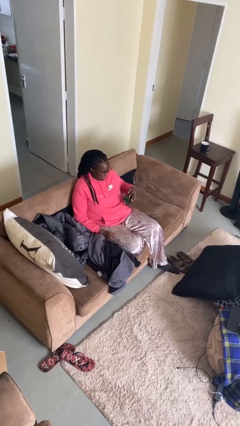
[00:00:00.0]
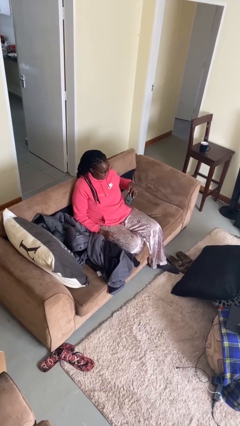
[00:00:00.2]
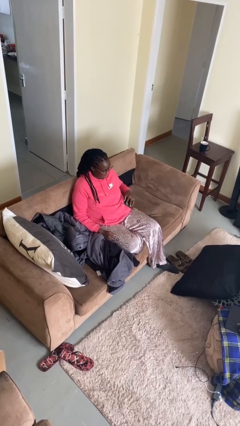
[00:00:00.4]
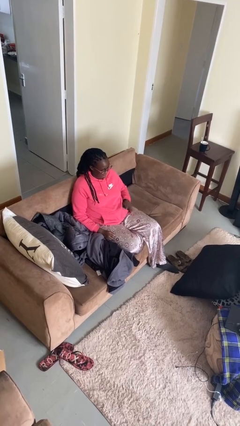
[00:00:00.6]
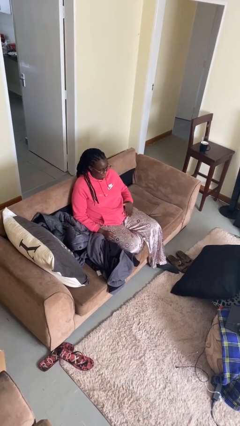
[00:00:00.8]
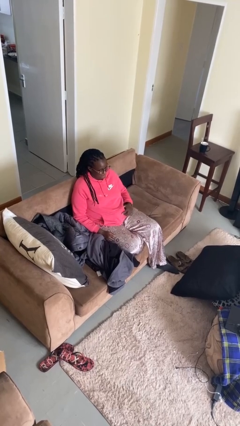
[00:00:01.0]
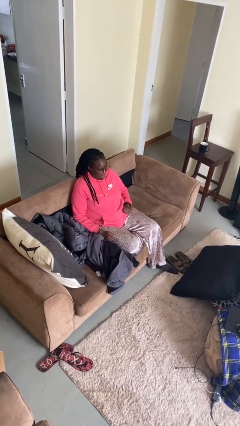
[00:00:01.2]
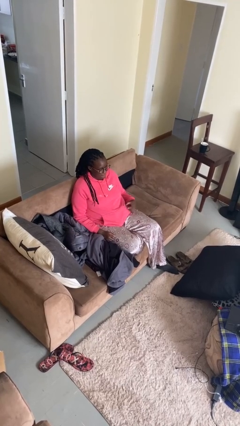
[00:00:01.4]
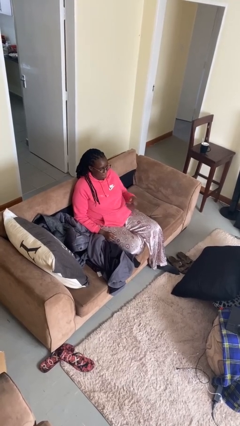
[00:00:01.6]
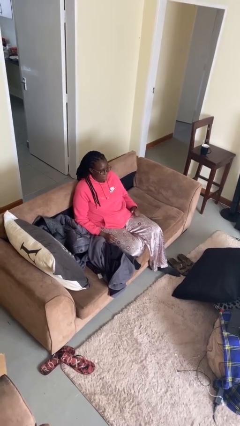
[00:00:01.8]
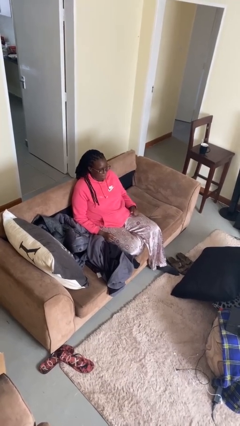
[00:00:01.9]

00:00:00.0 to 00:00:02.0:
person puts phone into pocket

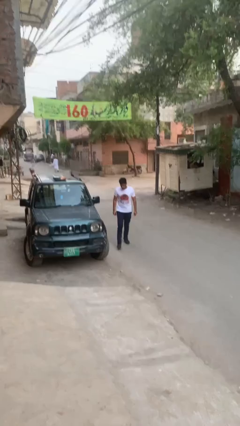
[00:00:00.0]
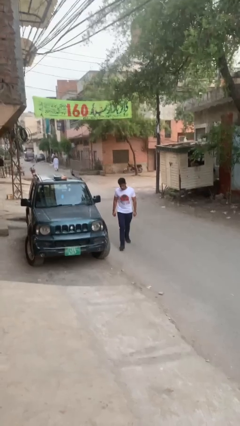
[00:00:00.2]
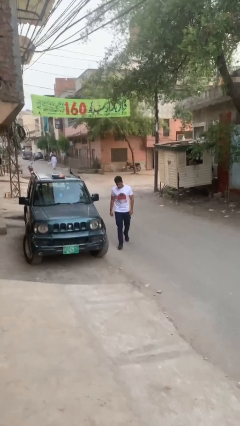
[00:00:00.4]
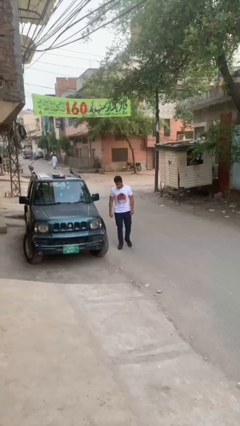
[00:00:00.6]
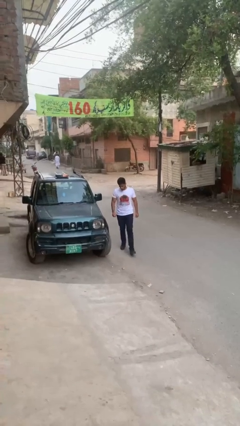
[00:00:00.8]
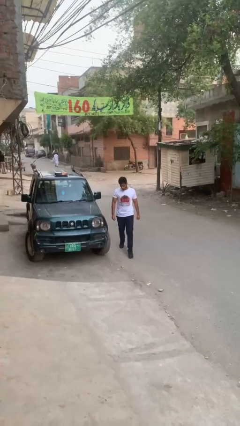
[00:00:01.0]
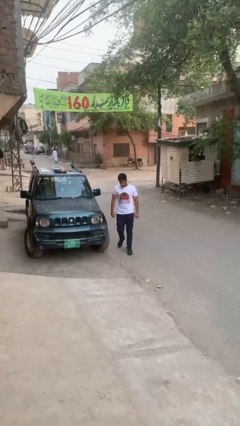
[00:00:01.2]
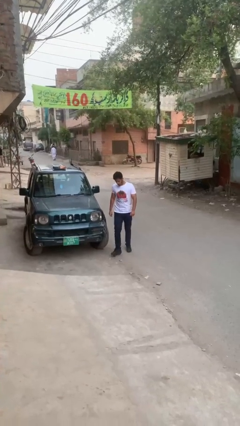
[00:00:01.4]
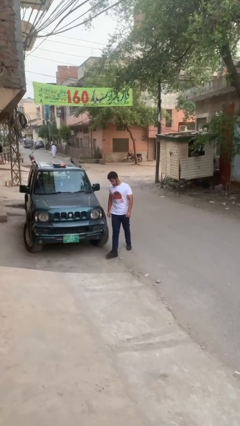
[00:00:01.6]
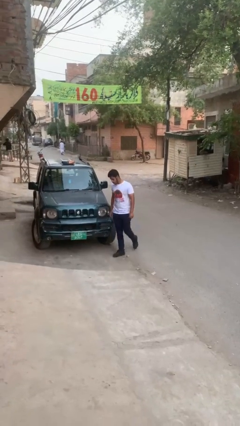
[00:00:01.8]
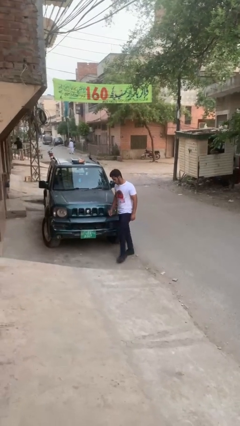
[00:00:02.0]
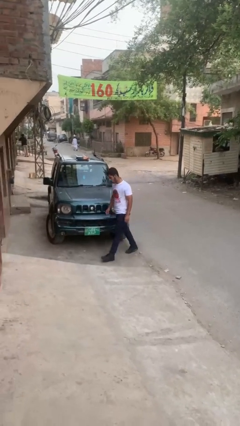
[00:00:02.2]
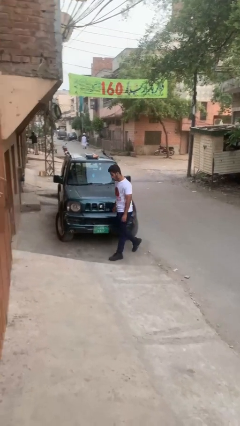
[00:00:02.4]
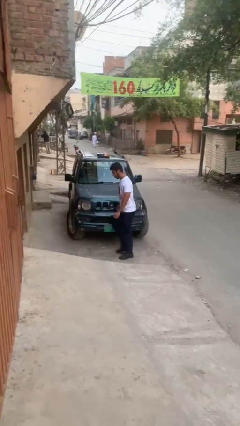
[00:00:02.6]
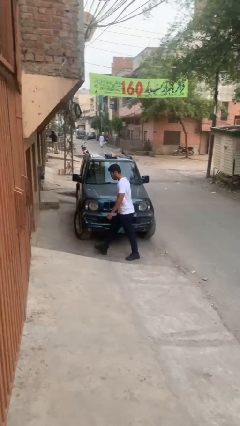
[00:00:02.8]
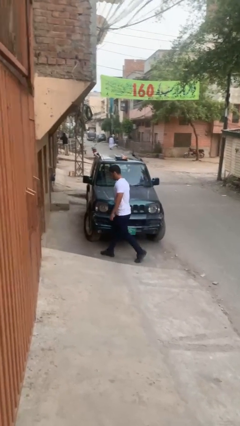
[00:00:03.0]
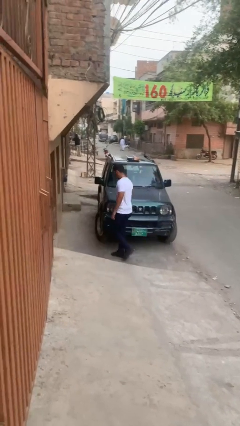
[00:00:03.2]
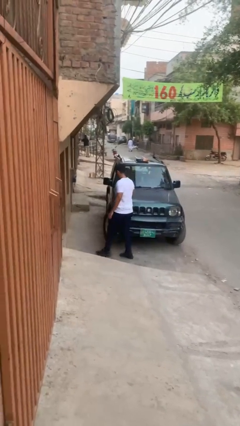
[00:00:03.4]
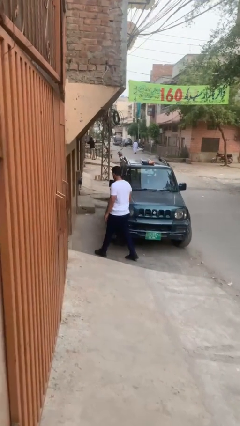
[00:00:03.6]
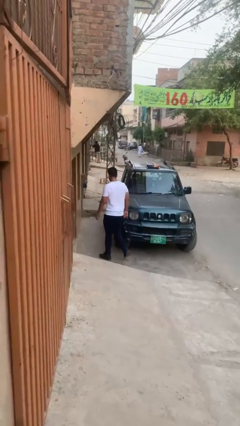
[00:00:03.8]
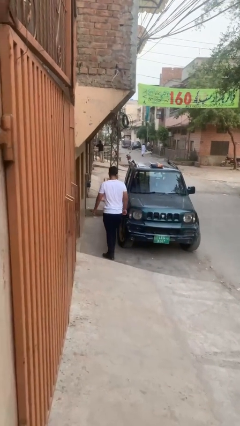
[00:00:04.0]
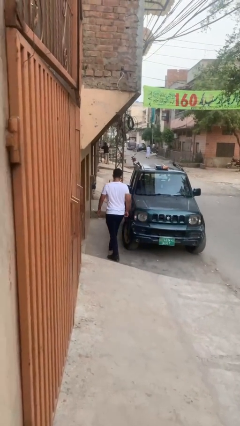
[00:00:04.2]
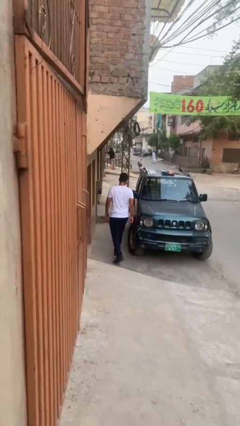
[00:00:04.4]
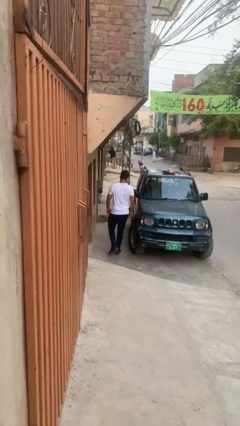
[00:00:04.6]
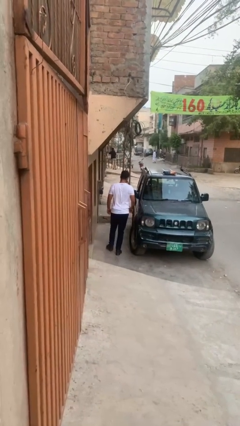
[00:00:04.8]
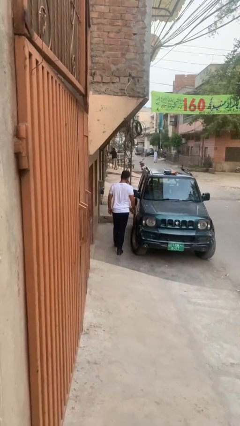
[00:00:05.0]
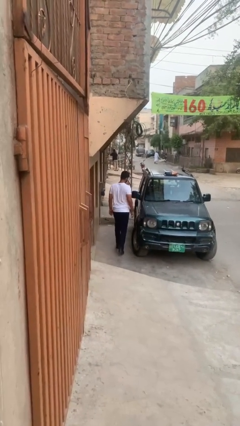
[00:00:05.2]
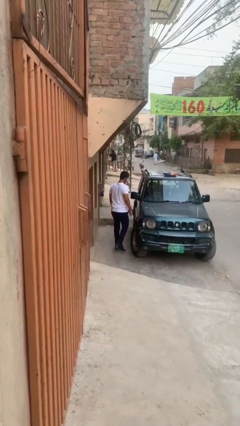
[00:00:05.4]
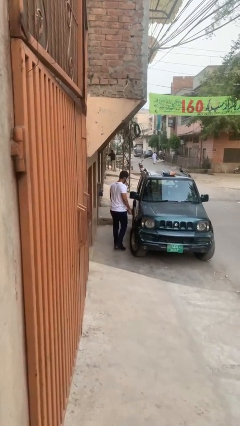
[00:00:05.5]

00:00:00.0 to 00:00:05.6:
person walks around car

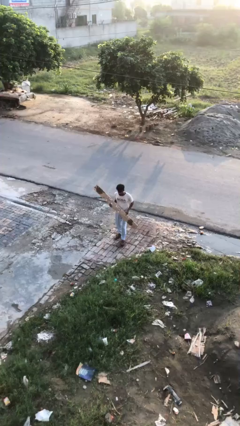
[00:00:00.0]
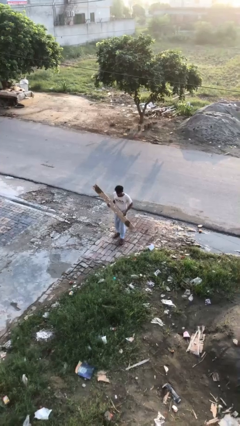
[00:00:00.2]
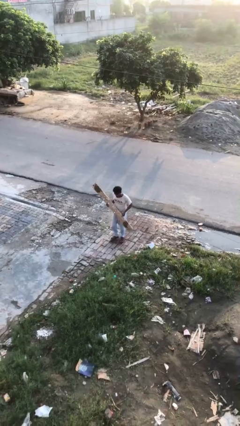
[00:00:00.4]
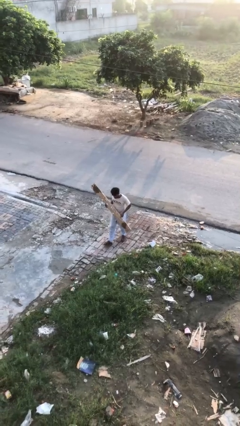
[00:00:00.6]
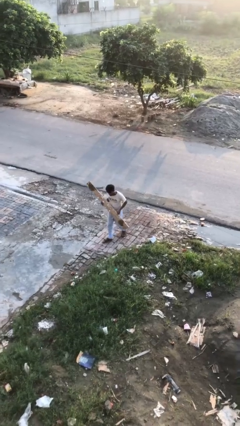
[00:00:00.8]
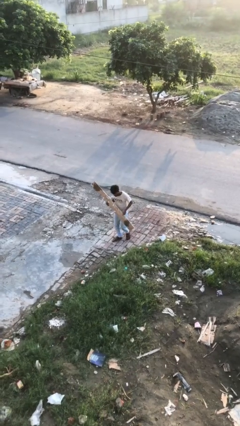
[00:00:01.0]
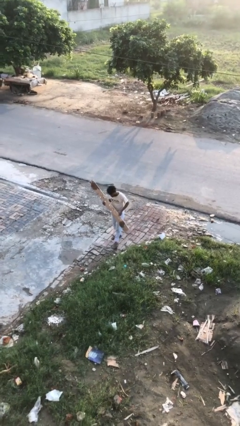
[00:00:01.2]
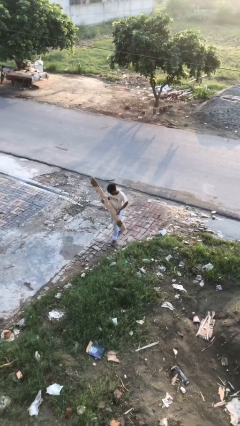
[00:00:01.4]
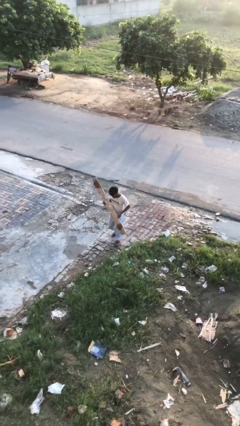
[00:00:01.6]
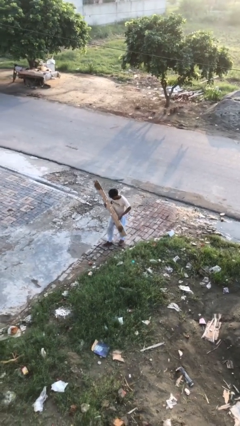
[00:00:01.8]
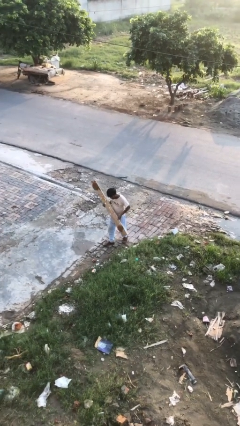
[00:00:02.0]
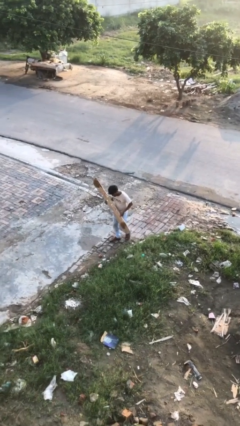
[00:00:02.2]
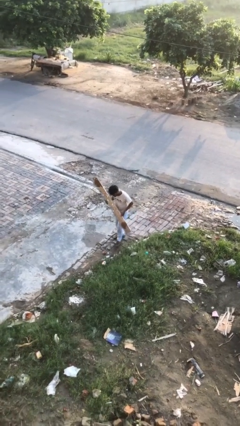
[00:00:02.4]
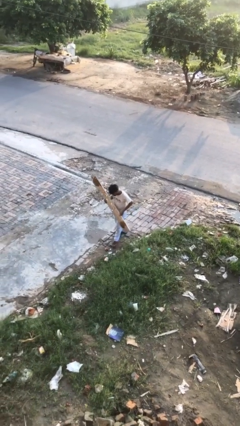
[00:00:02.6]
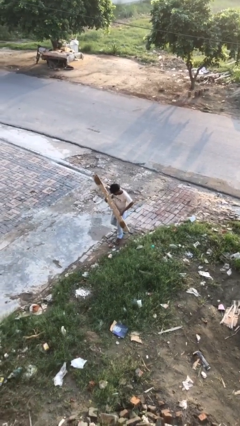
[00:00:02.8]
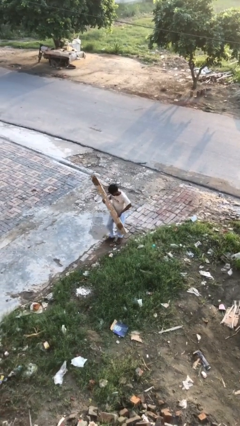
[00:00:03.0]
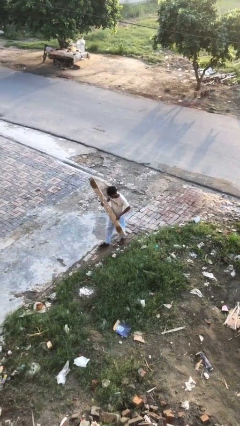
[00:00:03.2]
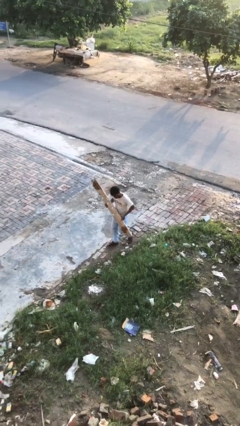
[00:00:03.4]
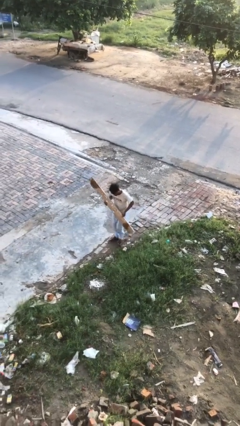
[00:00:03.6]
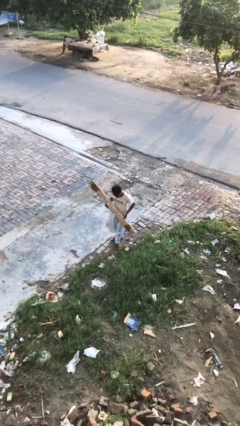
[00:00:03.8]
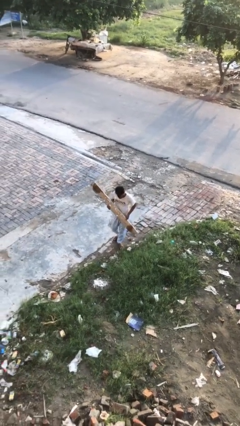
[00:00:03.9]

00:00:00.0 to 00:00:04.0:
person carries heavy object

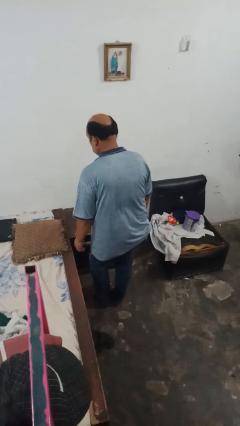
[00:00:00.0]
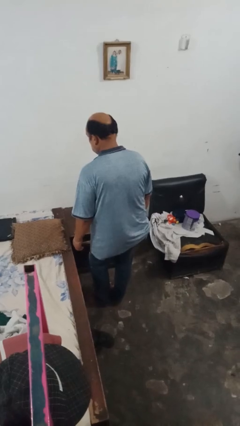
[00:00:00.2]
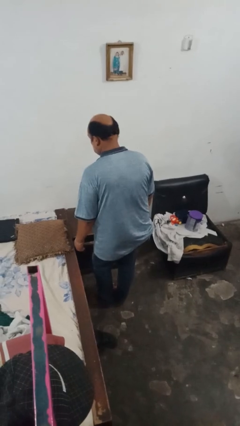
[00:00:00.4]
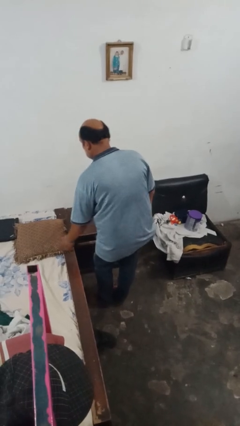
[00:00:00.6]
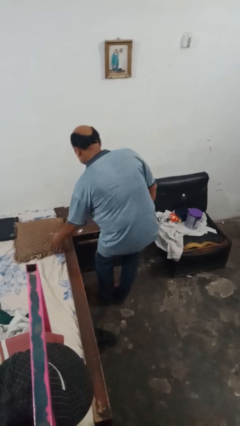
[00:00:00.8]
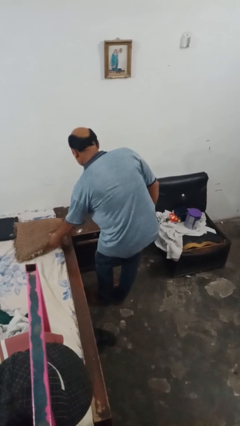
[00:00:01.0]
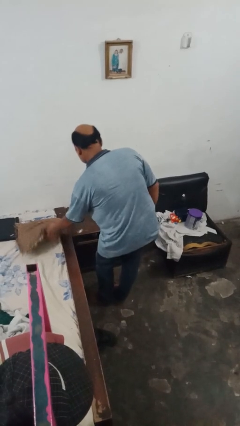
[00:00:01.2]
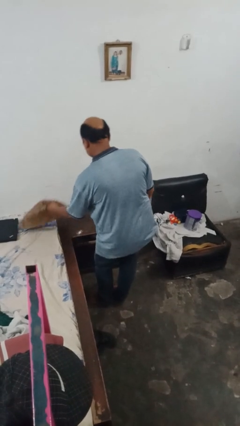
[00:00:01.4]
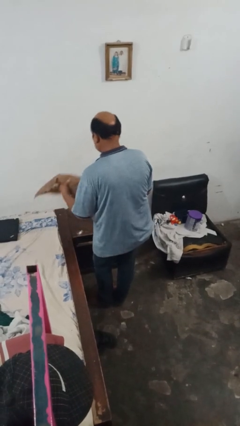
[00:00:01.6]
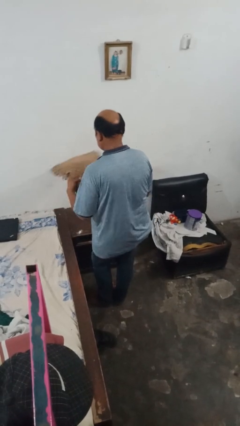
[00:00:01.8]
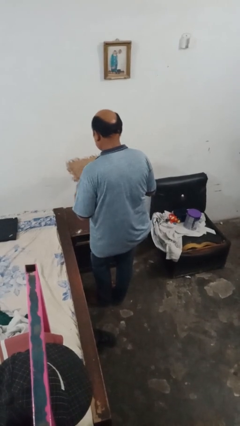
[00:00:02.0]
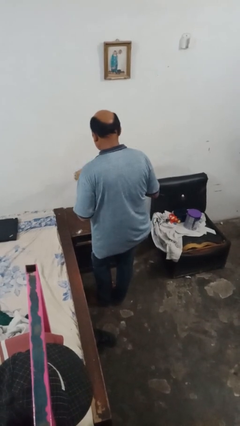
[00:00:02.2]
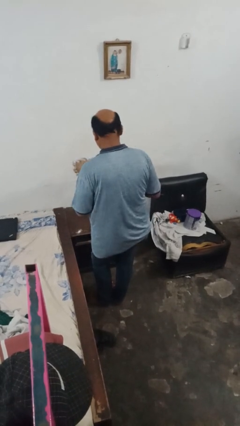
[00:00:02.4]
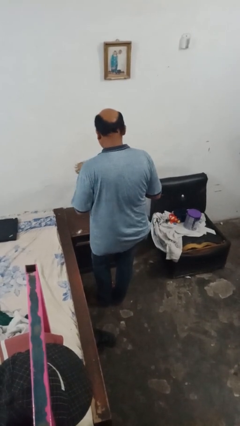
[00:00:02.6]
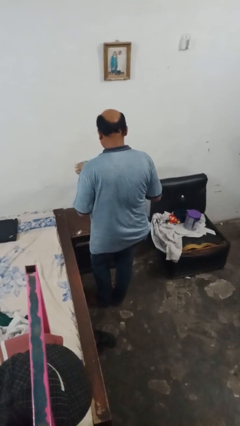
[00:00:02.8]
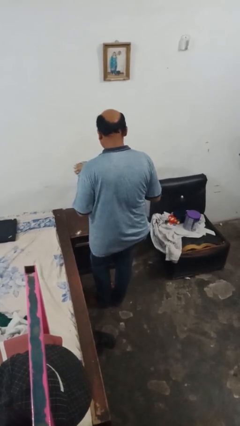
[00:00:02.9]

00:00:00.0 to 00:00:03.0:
person picks up object from bed

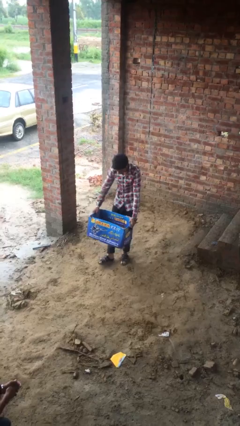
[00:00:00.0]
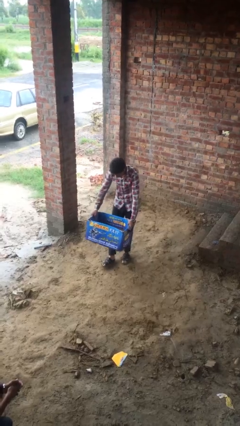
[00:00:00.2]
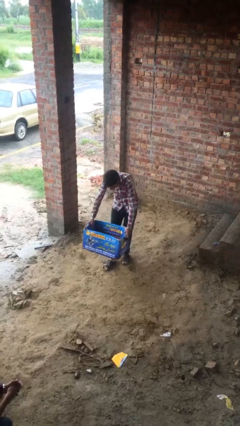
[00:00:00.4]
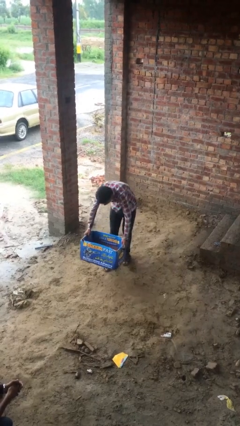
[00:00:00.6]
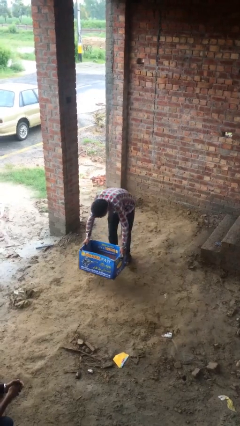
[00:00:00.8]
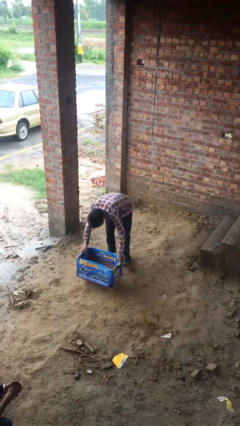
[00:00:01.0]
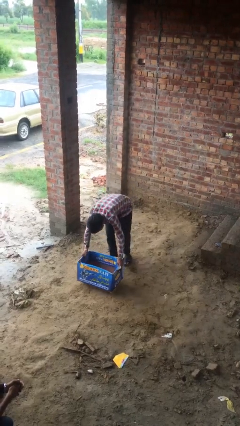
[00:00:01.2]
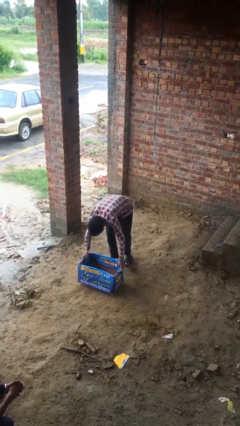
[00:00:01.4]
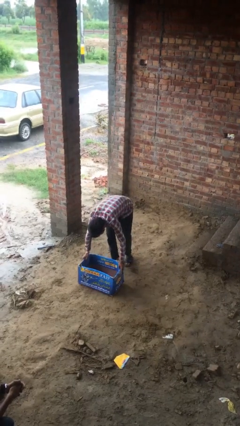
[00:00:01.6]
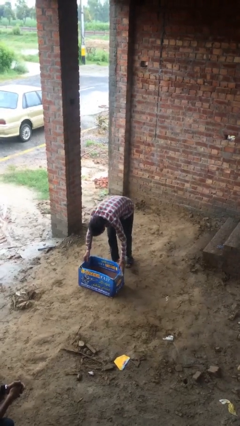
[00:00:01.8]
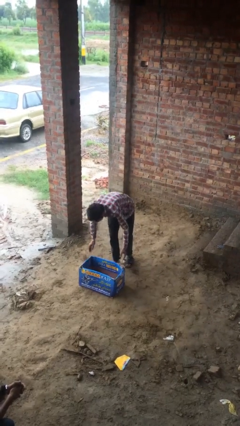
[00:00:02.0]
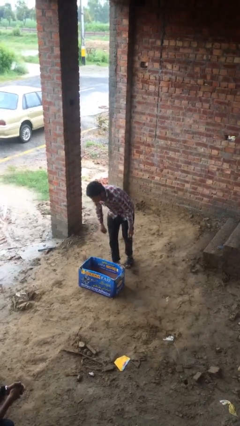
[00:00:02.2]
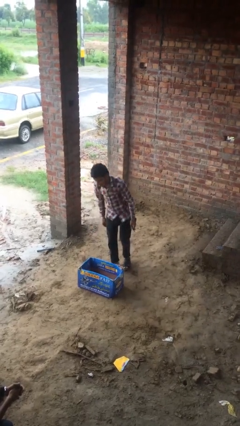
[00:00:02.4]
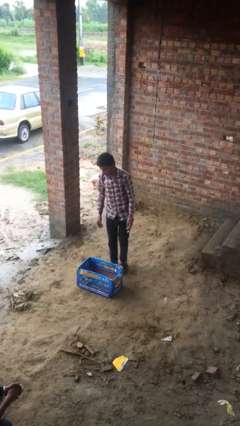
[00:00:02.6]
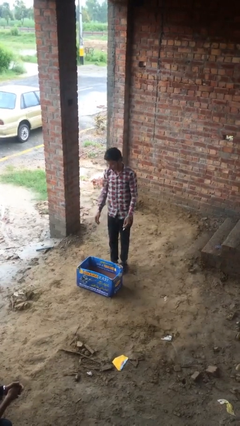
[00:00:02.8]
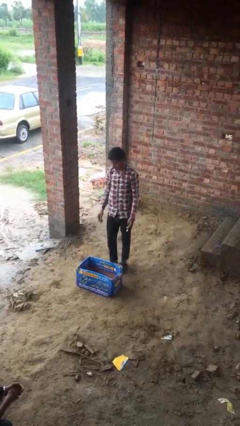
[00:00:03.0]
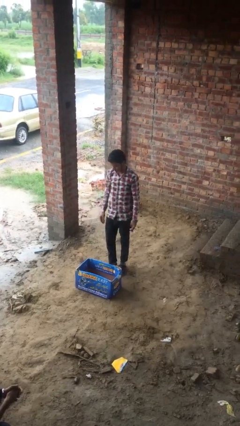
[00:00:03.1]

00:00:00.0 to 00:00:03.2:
person puts down object on floor
